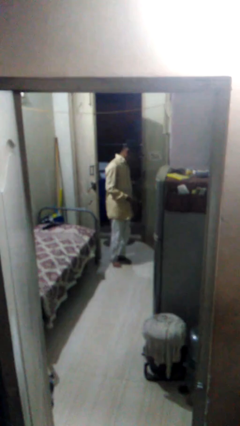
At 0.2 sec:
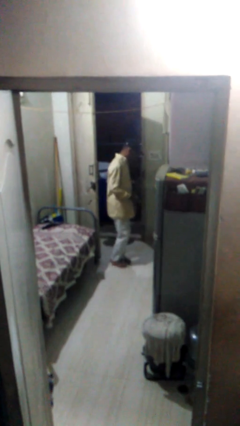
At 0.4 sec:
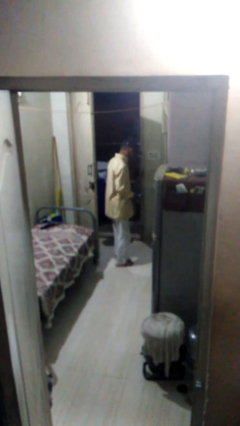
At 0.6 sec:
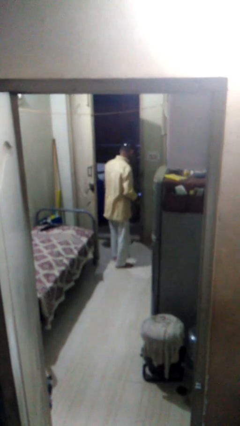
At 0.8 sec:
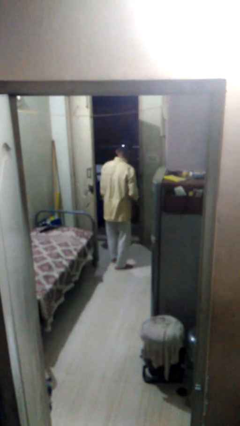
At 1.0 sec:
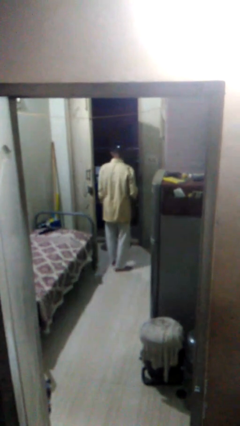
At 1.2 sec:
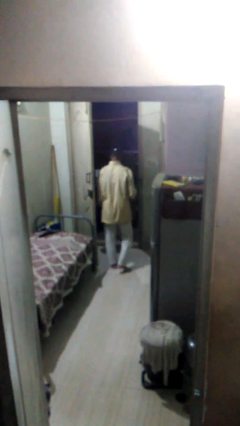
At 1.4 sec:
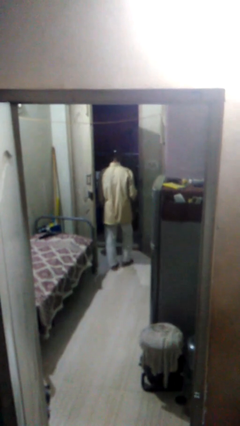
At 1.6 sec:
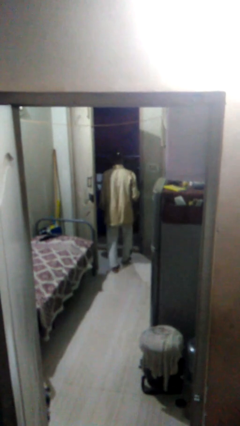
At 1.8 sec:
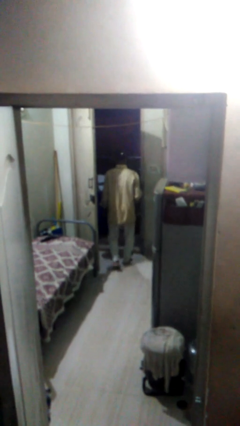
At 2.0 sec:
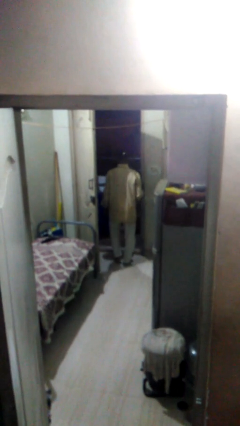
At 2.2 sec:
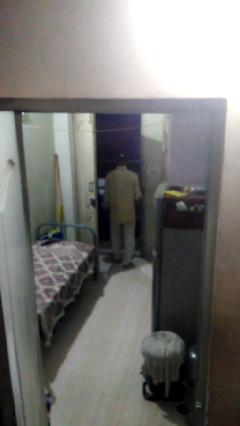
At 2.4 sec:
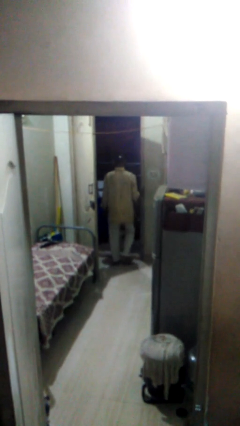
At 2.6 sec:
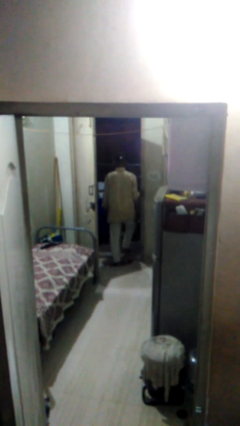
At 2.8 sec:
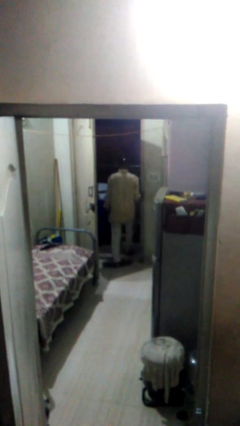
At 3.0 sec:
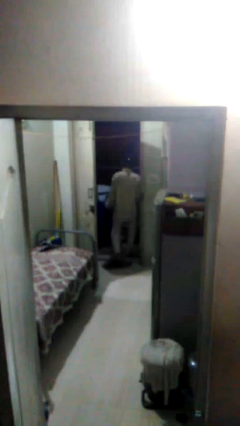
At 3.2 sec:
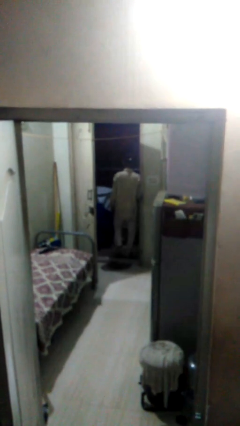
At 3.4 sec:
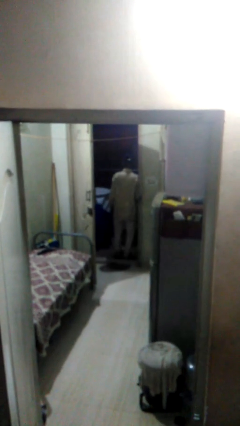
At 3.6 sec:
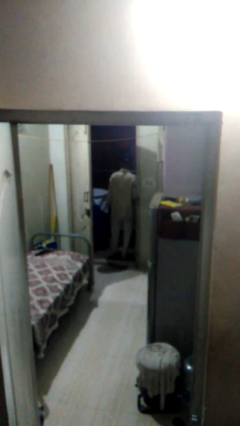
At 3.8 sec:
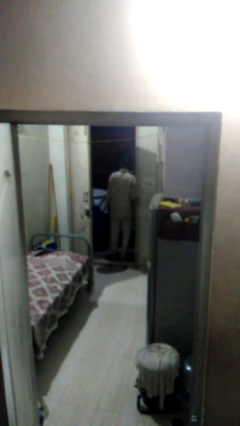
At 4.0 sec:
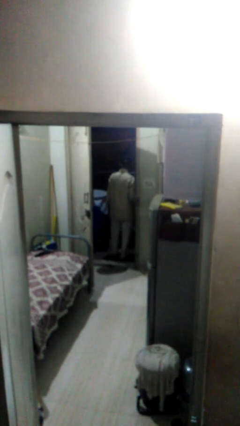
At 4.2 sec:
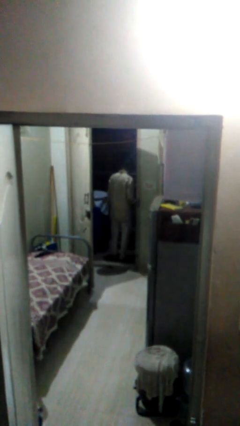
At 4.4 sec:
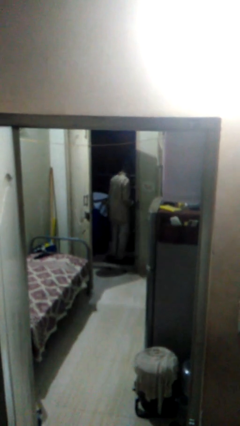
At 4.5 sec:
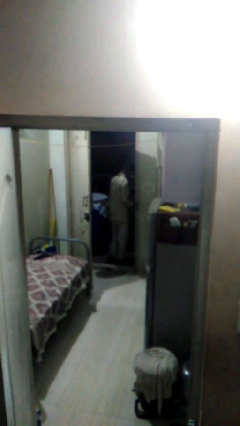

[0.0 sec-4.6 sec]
person exits scene through structure

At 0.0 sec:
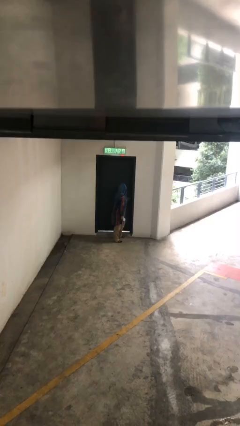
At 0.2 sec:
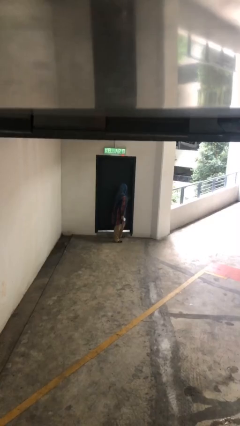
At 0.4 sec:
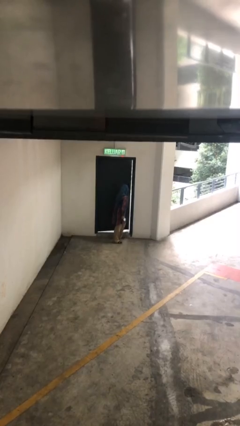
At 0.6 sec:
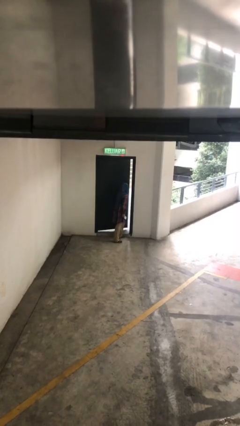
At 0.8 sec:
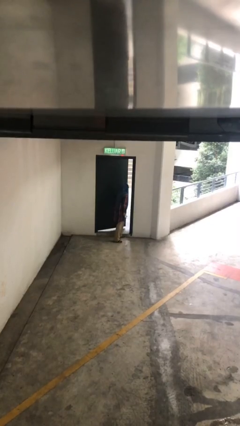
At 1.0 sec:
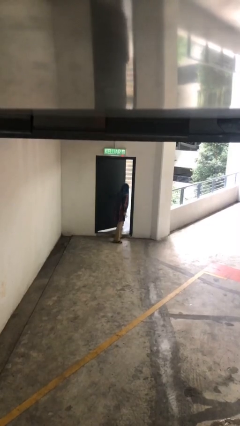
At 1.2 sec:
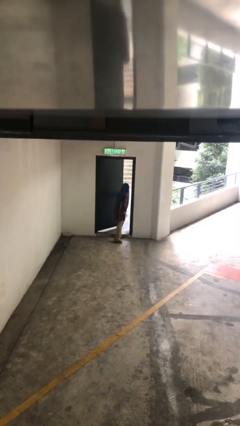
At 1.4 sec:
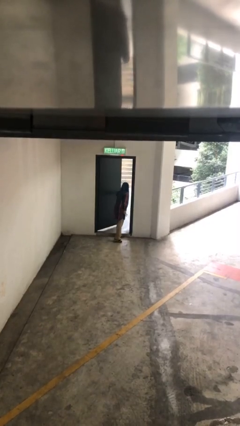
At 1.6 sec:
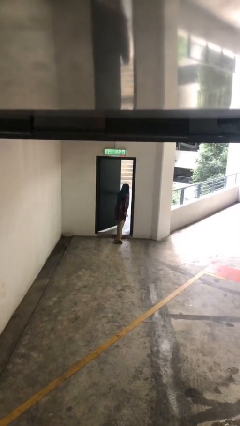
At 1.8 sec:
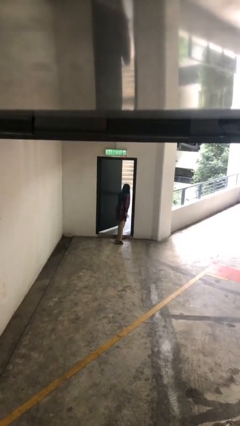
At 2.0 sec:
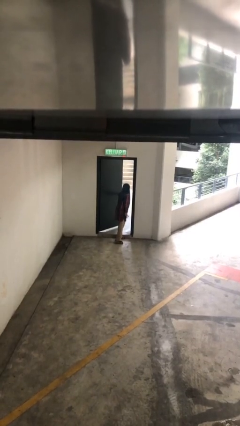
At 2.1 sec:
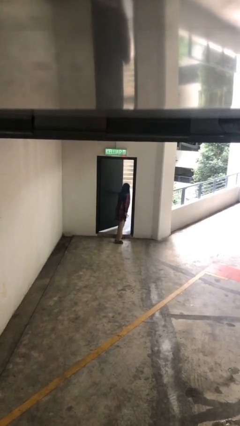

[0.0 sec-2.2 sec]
person opens facility door

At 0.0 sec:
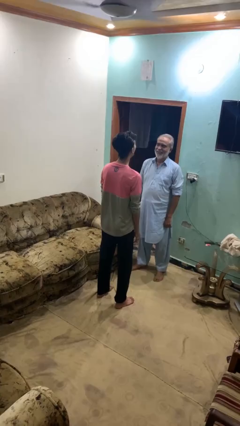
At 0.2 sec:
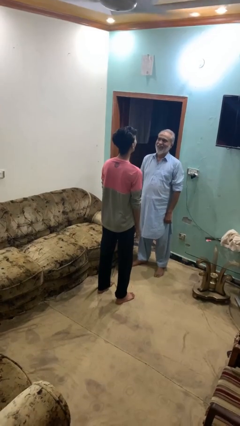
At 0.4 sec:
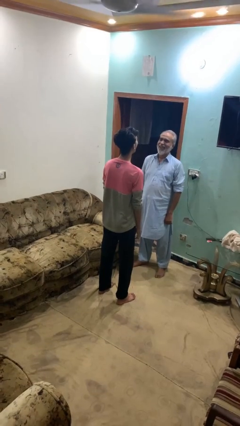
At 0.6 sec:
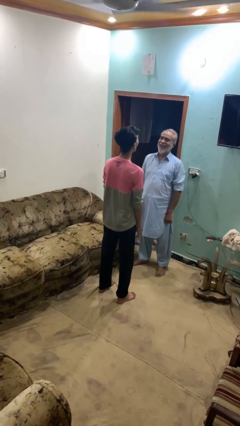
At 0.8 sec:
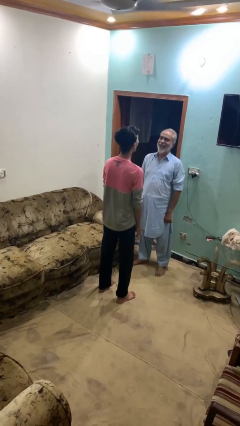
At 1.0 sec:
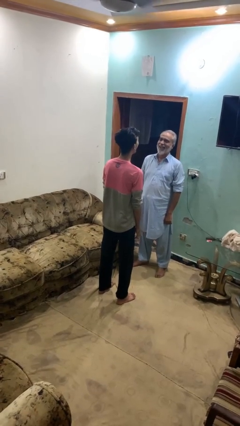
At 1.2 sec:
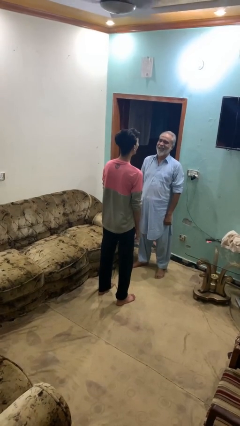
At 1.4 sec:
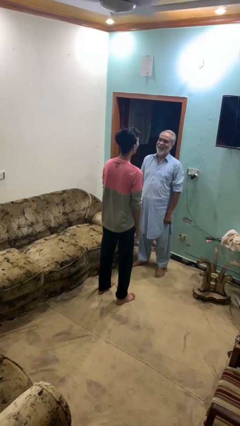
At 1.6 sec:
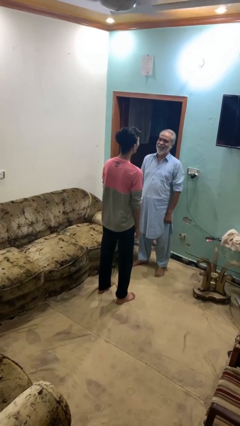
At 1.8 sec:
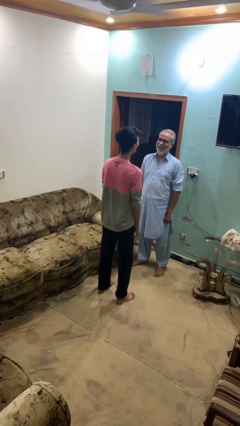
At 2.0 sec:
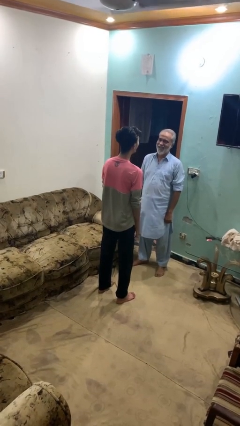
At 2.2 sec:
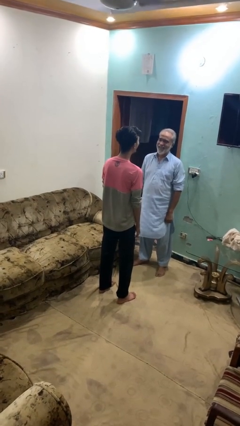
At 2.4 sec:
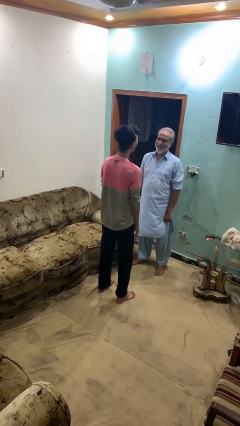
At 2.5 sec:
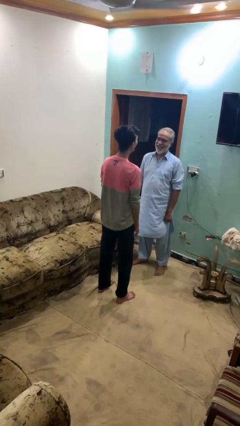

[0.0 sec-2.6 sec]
person laughs with person

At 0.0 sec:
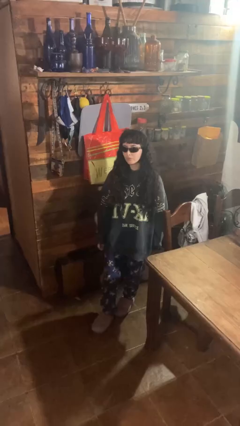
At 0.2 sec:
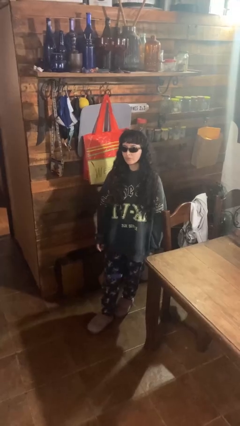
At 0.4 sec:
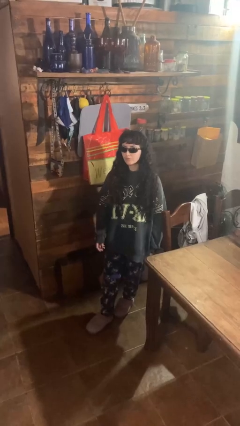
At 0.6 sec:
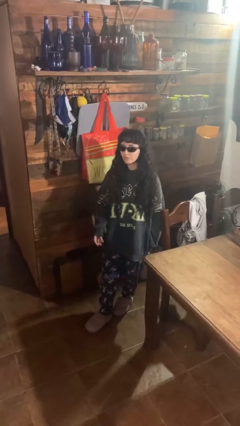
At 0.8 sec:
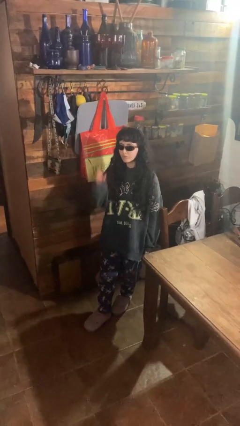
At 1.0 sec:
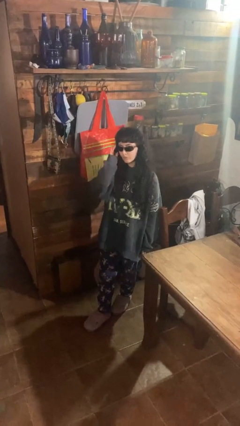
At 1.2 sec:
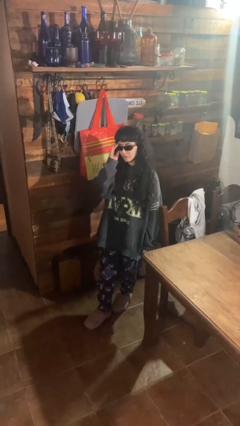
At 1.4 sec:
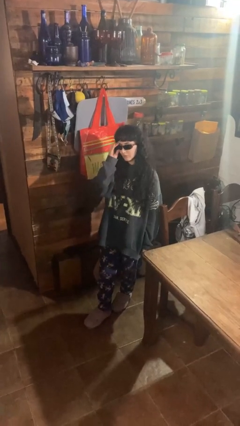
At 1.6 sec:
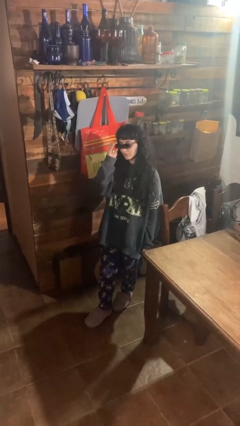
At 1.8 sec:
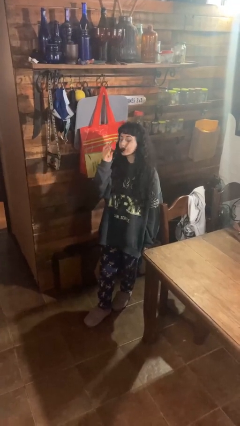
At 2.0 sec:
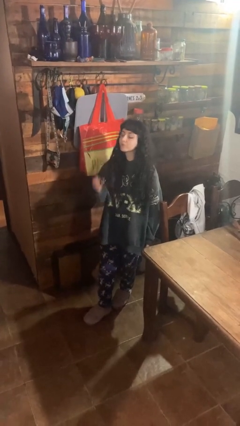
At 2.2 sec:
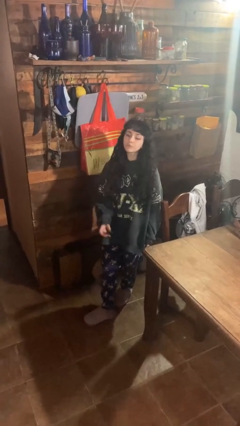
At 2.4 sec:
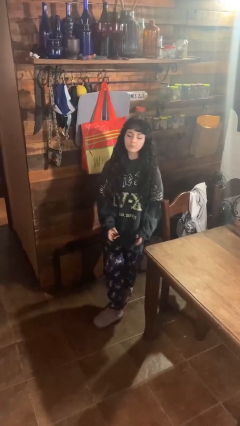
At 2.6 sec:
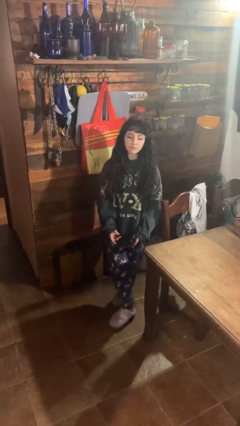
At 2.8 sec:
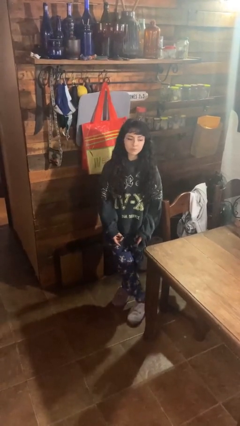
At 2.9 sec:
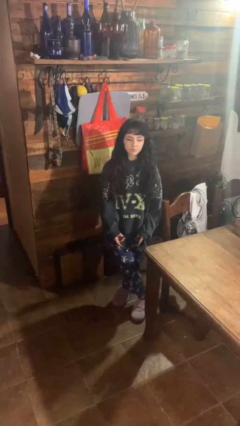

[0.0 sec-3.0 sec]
person takes off sunglasses

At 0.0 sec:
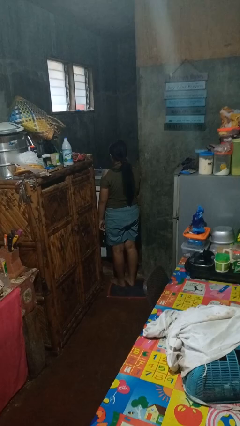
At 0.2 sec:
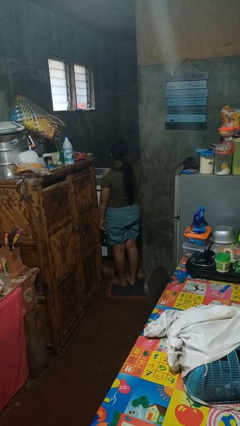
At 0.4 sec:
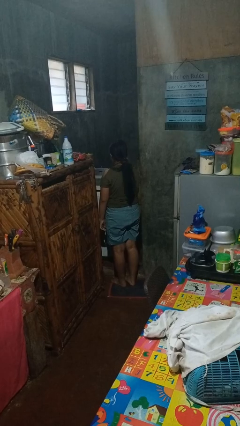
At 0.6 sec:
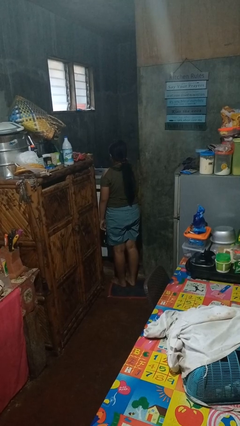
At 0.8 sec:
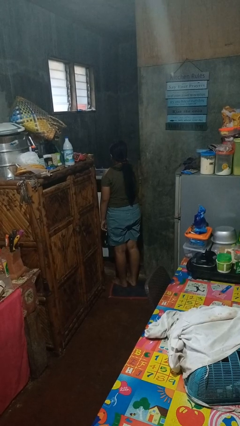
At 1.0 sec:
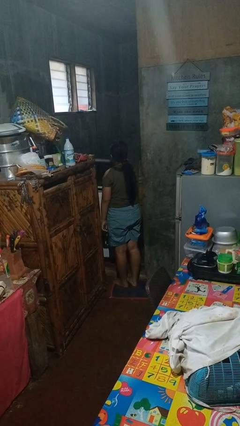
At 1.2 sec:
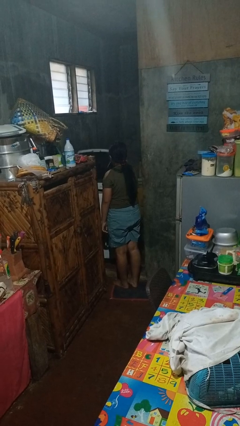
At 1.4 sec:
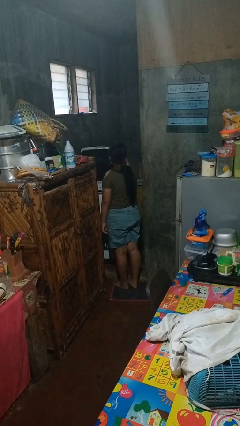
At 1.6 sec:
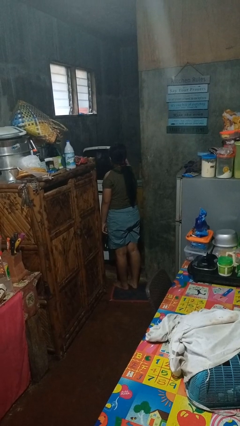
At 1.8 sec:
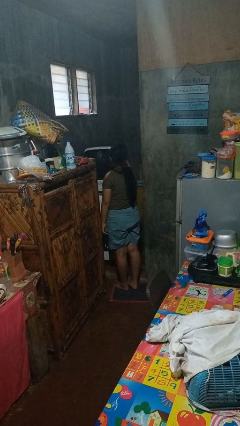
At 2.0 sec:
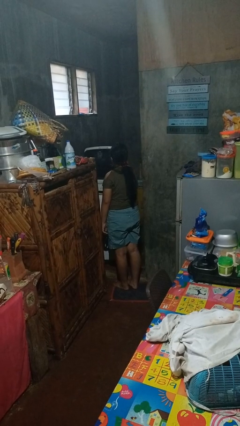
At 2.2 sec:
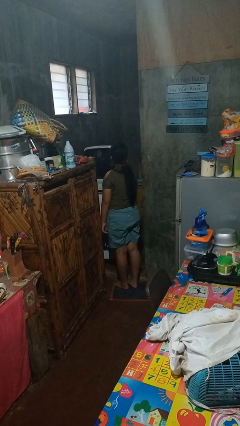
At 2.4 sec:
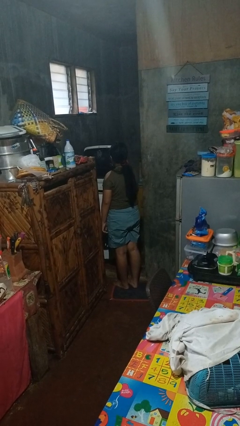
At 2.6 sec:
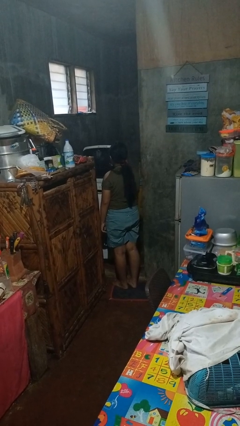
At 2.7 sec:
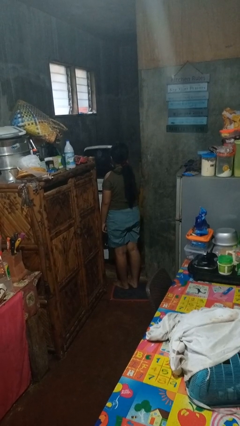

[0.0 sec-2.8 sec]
person opens clothes washer

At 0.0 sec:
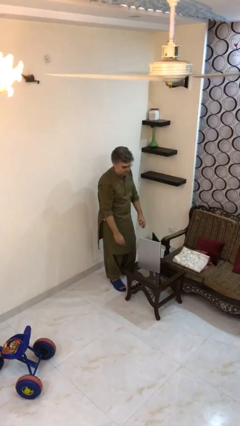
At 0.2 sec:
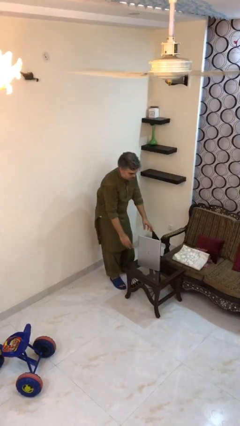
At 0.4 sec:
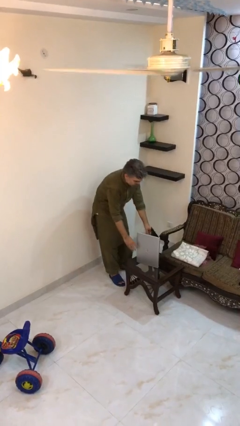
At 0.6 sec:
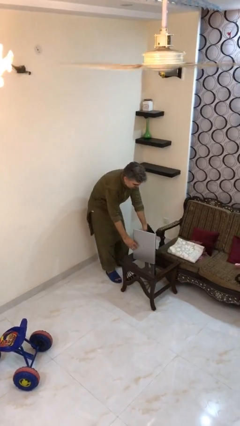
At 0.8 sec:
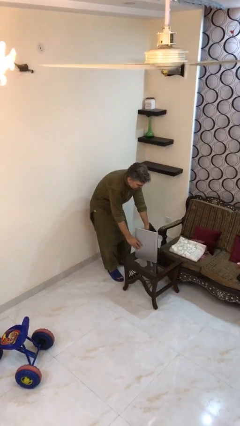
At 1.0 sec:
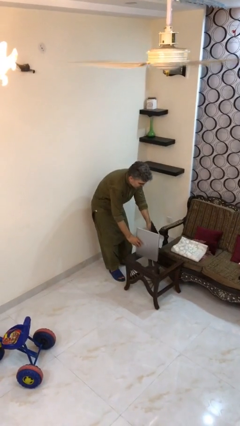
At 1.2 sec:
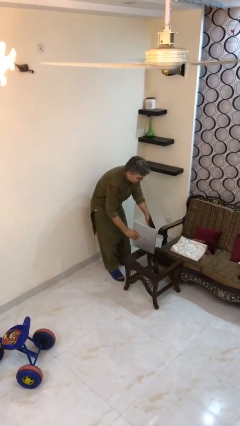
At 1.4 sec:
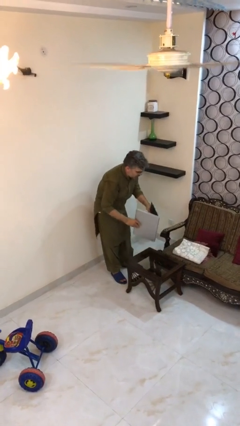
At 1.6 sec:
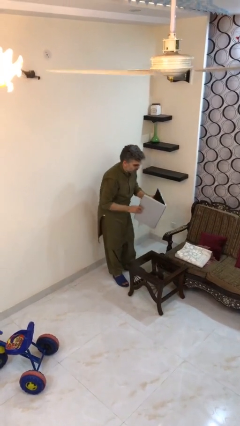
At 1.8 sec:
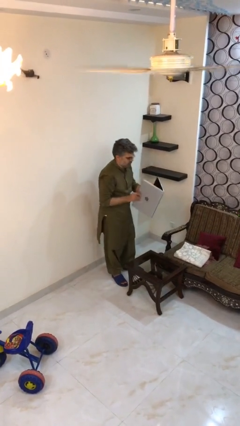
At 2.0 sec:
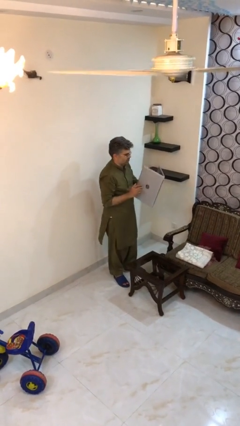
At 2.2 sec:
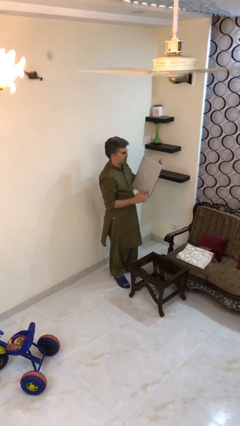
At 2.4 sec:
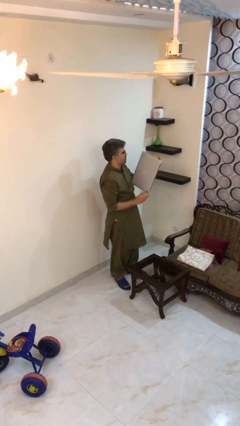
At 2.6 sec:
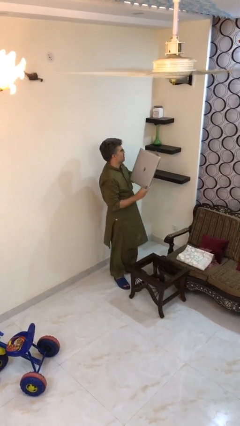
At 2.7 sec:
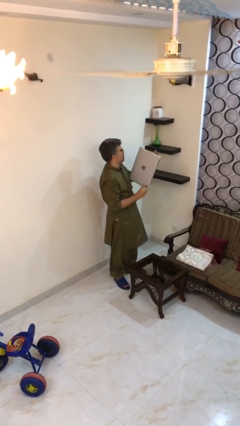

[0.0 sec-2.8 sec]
person picks up object from table
